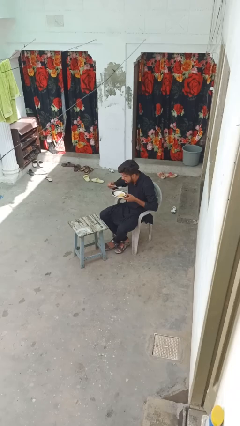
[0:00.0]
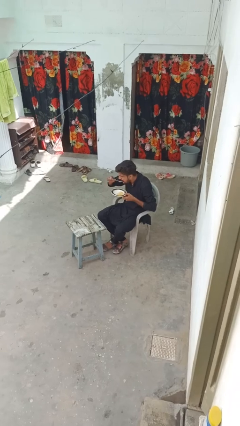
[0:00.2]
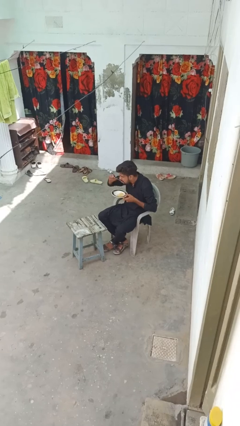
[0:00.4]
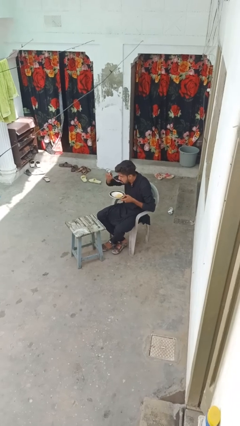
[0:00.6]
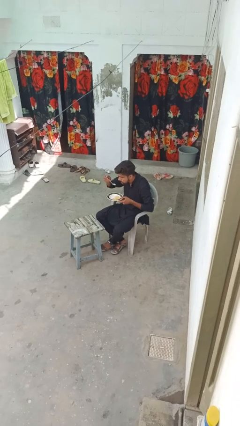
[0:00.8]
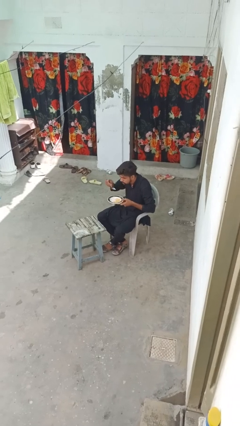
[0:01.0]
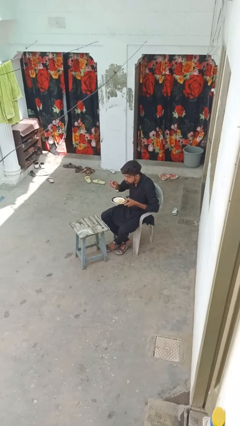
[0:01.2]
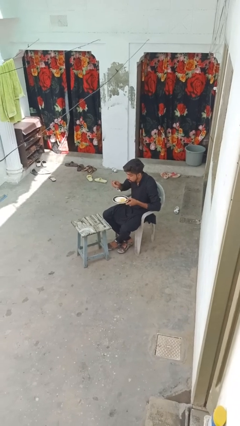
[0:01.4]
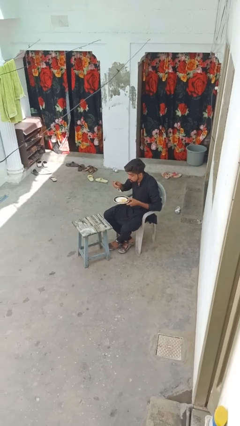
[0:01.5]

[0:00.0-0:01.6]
person eats with utensil

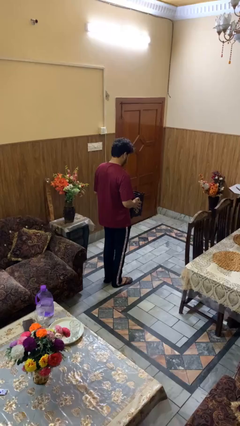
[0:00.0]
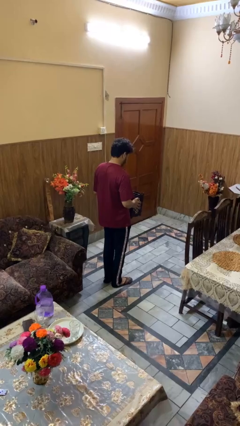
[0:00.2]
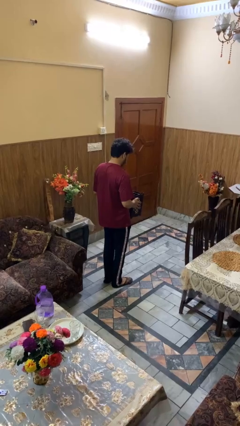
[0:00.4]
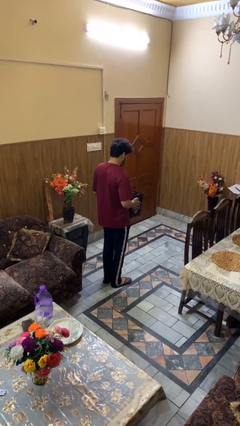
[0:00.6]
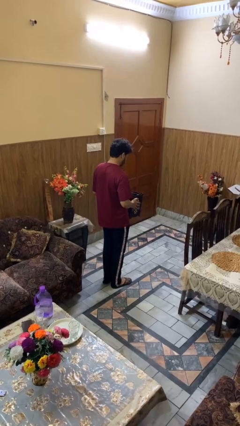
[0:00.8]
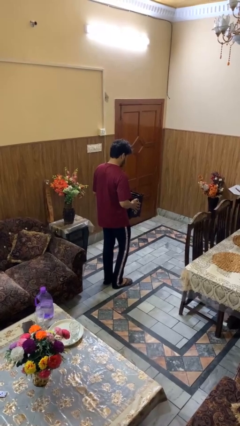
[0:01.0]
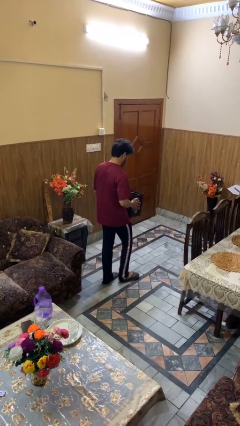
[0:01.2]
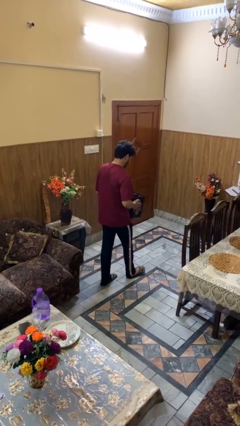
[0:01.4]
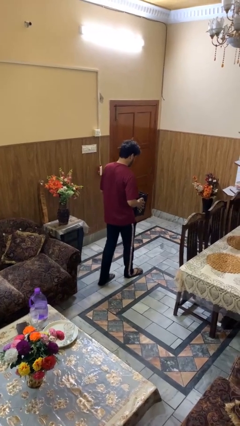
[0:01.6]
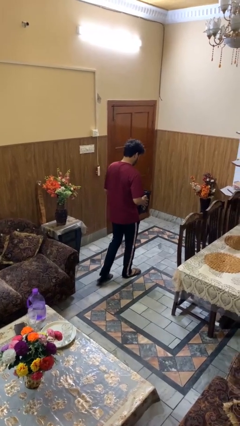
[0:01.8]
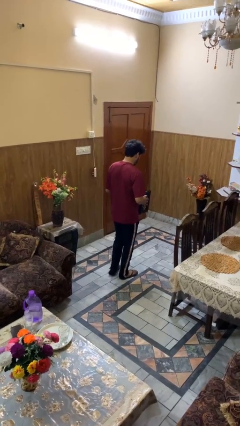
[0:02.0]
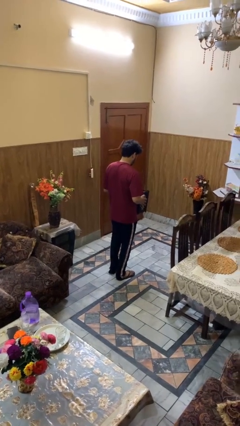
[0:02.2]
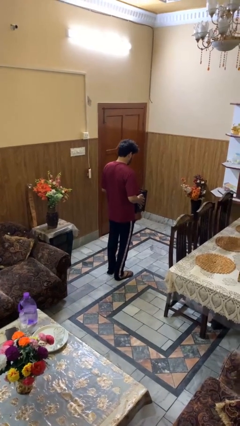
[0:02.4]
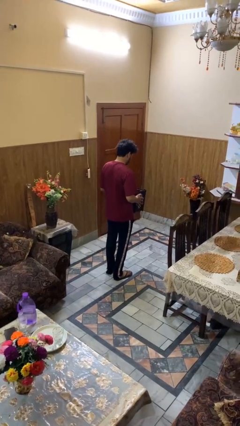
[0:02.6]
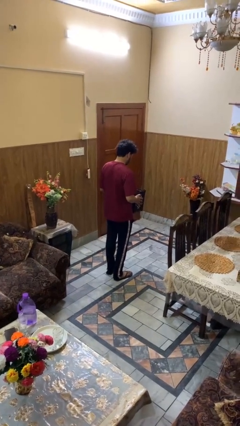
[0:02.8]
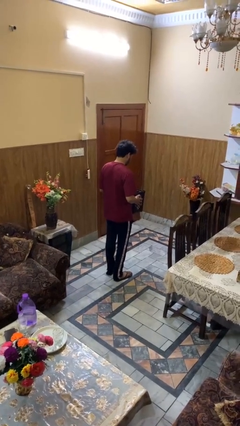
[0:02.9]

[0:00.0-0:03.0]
person carries groceries

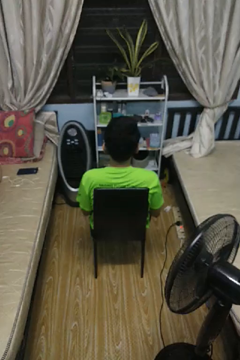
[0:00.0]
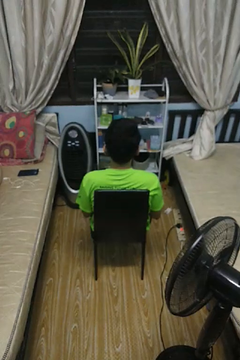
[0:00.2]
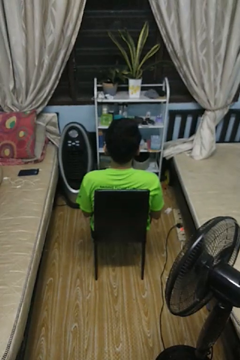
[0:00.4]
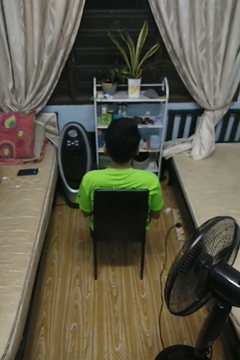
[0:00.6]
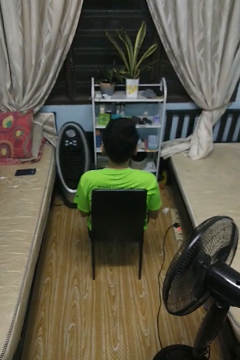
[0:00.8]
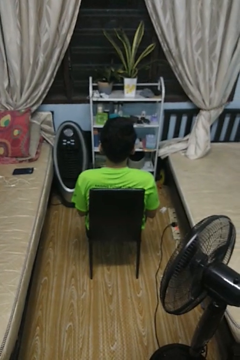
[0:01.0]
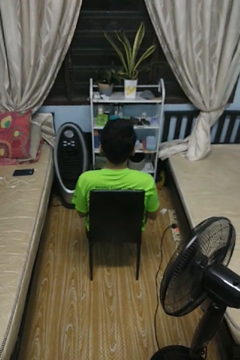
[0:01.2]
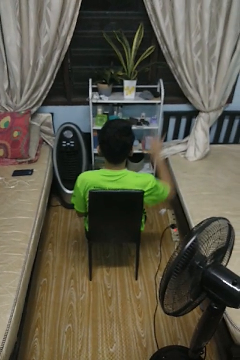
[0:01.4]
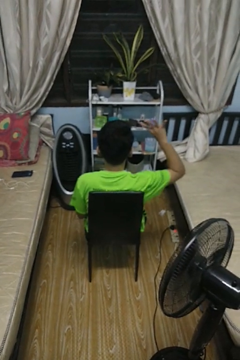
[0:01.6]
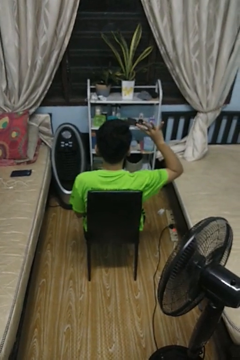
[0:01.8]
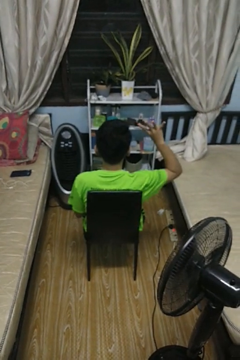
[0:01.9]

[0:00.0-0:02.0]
person gestures number four

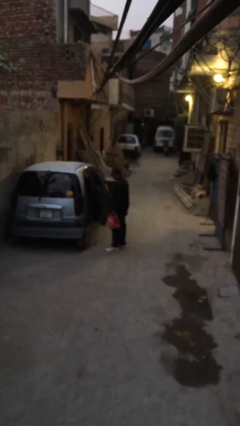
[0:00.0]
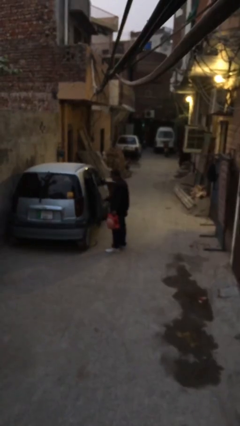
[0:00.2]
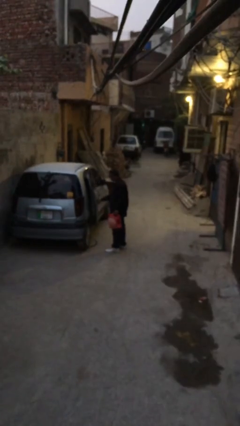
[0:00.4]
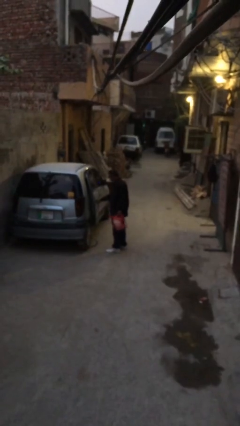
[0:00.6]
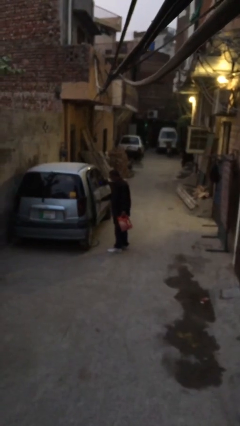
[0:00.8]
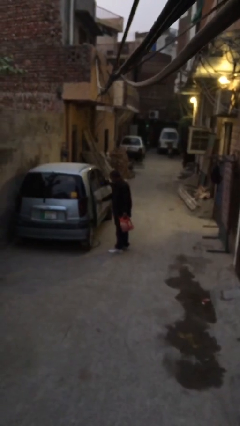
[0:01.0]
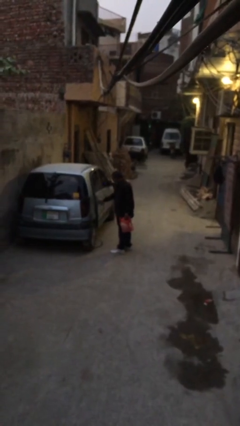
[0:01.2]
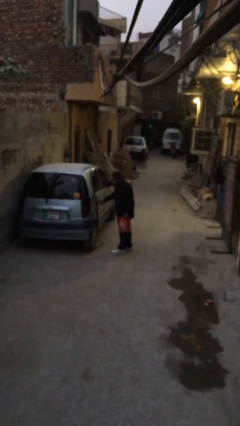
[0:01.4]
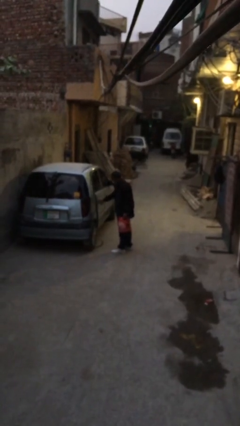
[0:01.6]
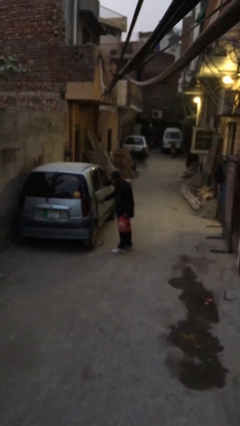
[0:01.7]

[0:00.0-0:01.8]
person closes car door

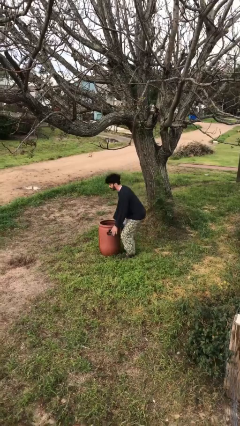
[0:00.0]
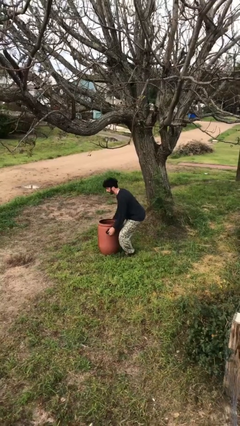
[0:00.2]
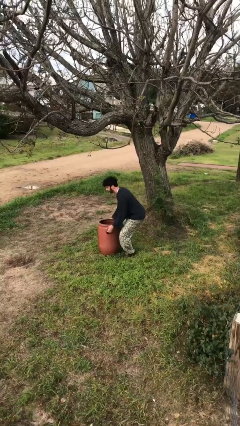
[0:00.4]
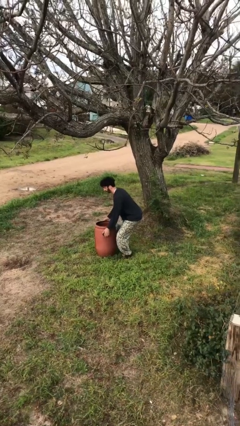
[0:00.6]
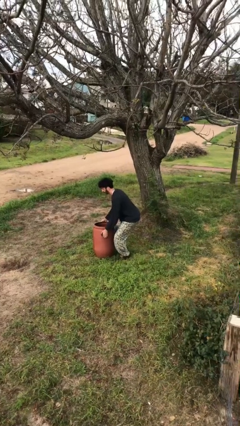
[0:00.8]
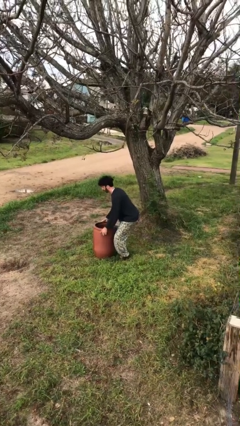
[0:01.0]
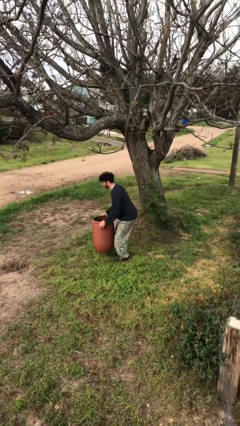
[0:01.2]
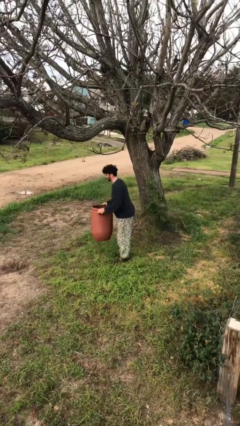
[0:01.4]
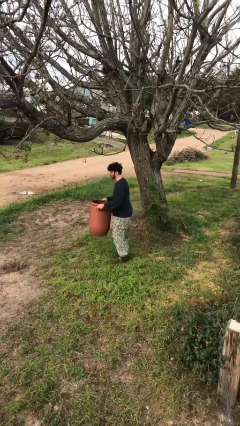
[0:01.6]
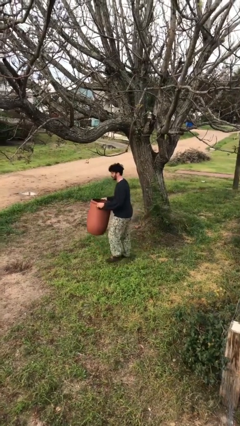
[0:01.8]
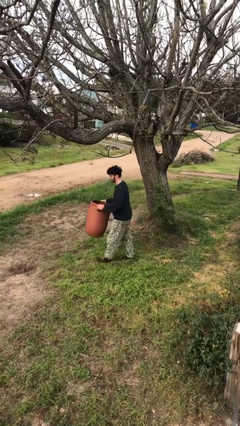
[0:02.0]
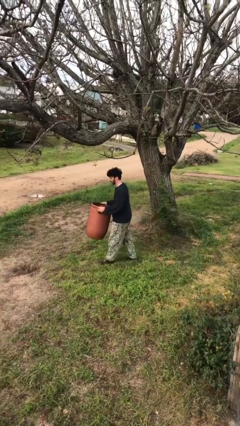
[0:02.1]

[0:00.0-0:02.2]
person picks up object from floor

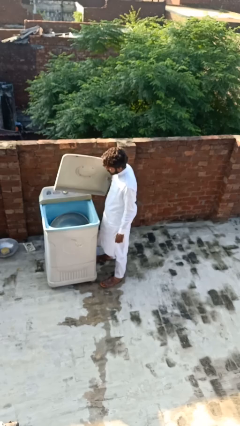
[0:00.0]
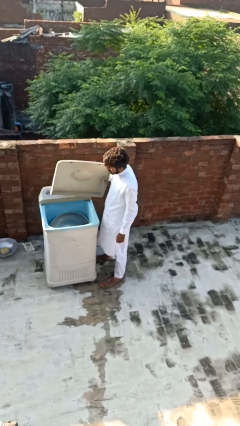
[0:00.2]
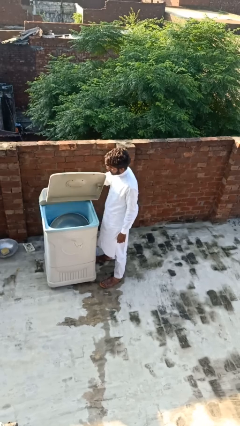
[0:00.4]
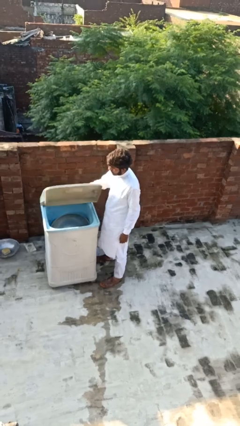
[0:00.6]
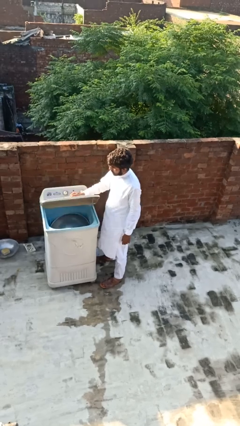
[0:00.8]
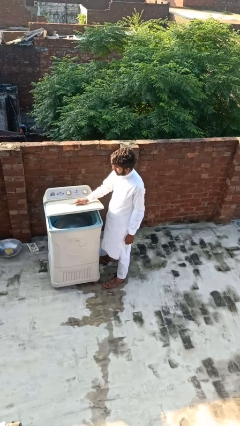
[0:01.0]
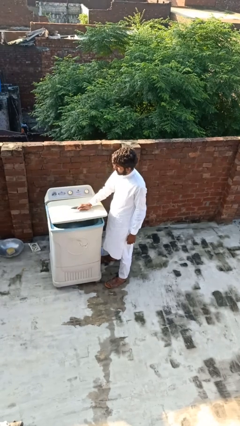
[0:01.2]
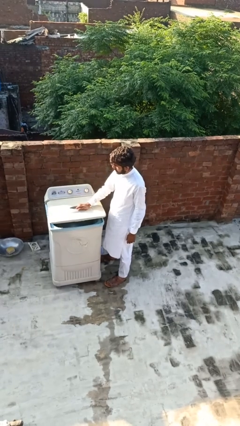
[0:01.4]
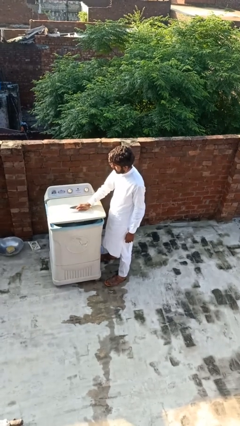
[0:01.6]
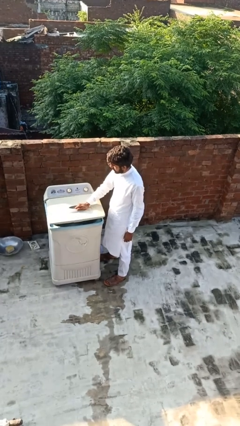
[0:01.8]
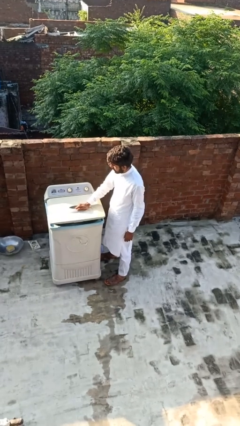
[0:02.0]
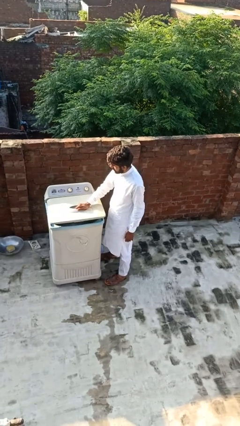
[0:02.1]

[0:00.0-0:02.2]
person closes clothes washer

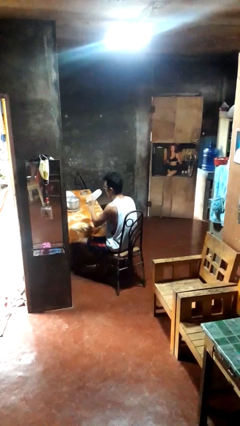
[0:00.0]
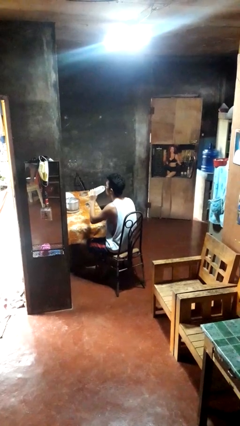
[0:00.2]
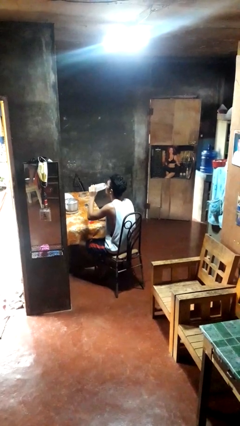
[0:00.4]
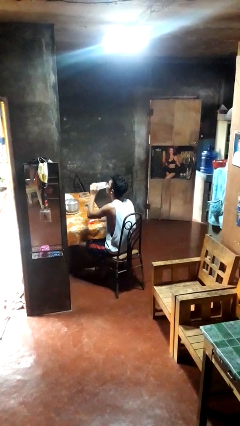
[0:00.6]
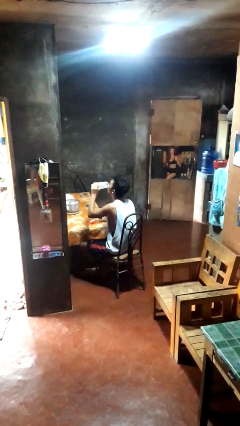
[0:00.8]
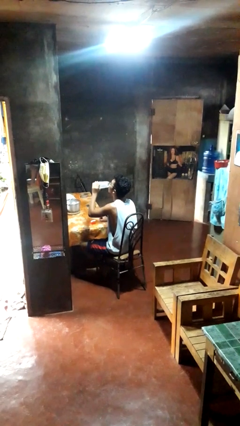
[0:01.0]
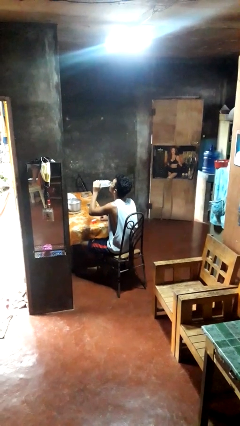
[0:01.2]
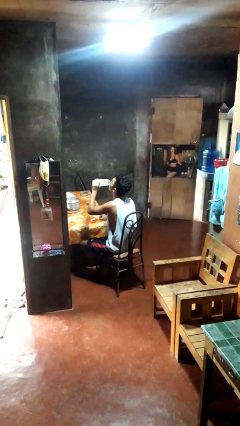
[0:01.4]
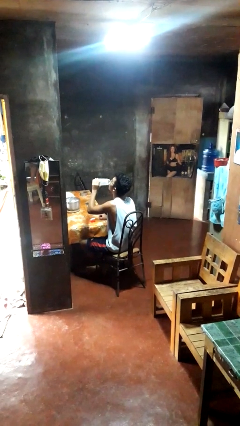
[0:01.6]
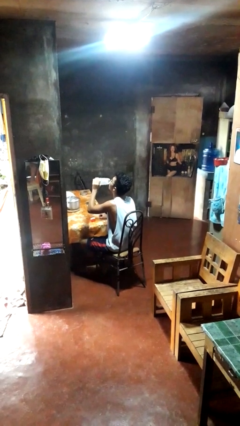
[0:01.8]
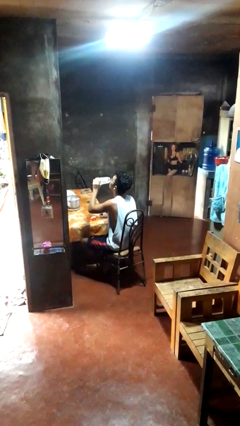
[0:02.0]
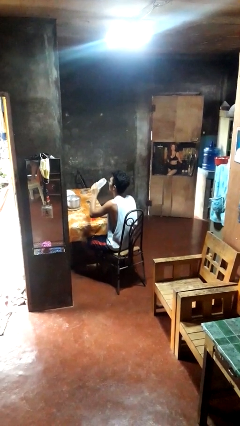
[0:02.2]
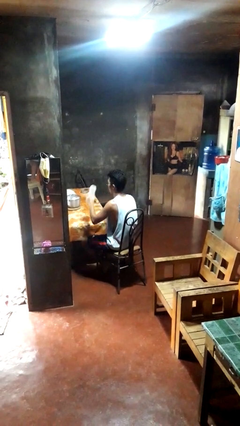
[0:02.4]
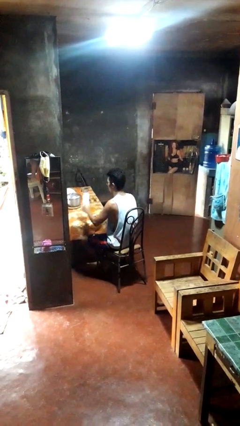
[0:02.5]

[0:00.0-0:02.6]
person drinks from bottle

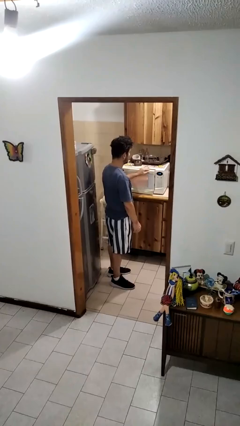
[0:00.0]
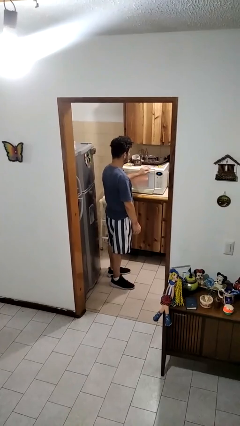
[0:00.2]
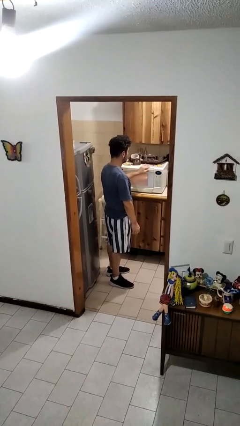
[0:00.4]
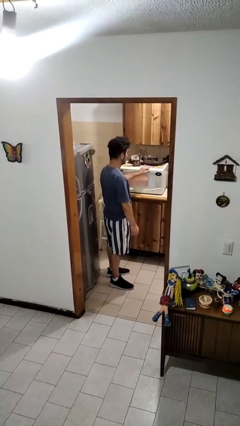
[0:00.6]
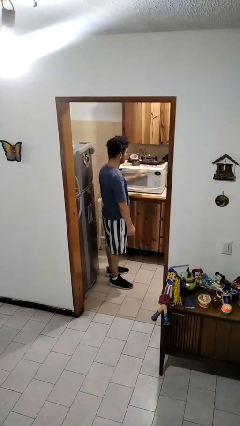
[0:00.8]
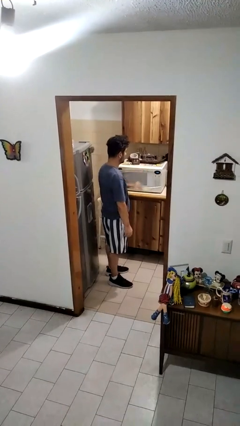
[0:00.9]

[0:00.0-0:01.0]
person closes microwave

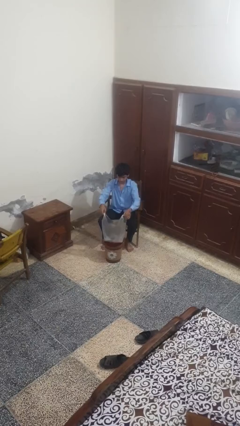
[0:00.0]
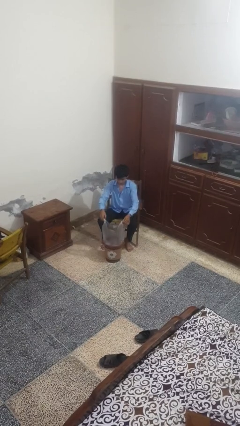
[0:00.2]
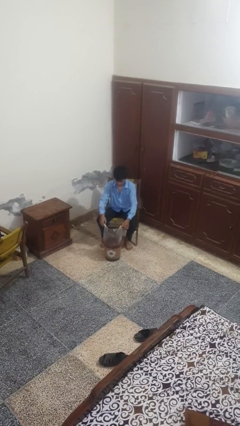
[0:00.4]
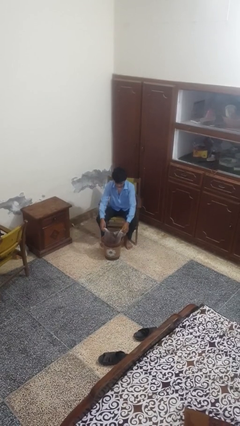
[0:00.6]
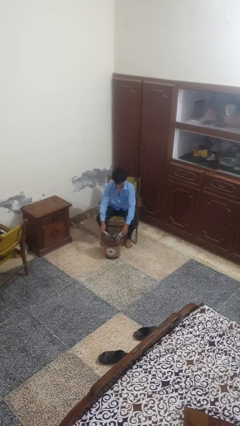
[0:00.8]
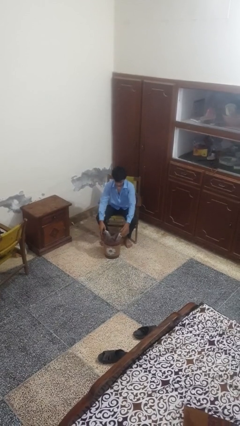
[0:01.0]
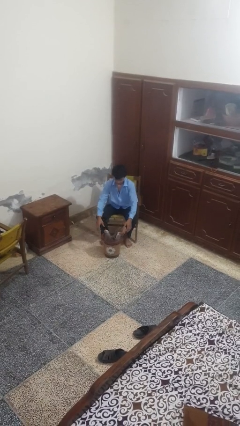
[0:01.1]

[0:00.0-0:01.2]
person inserts trashbag into trashcan
